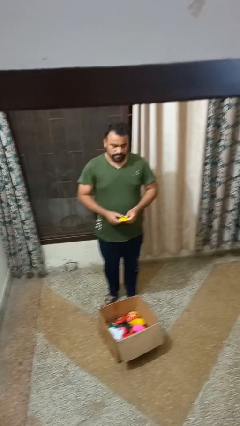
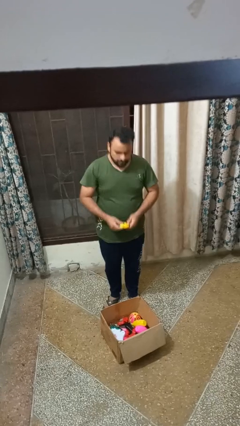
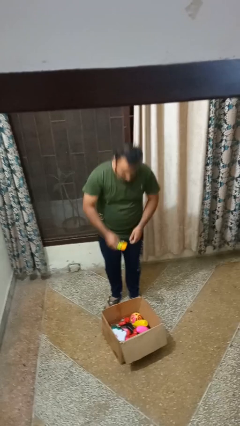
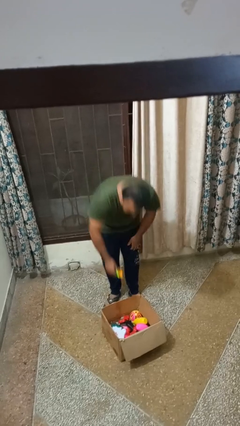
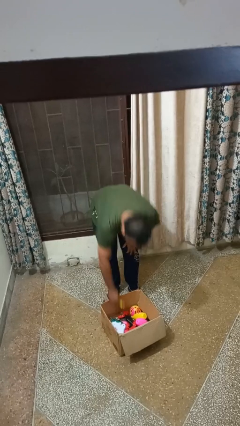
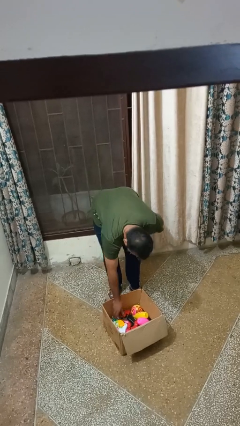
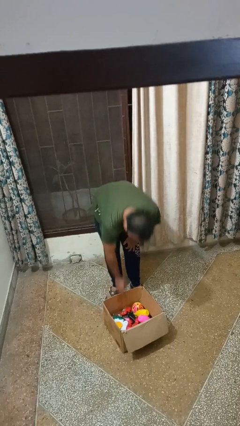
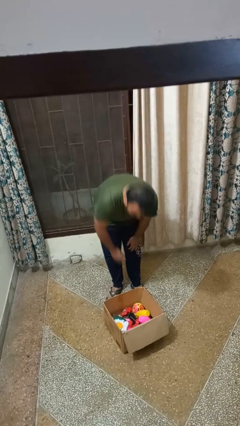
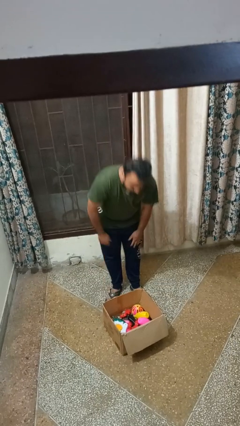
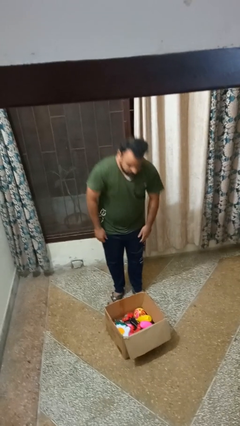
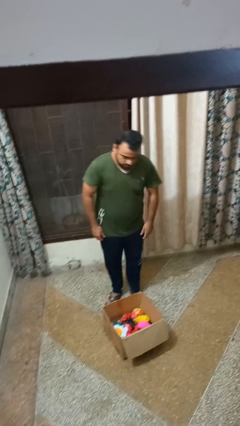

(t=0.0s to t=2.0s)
person puts object into box

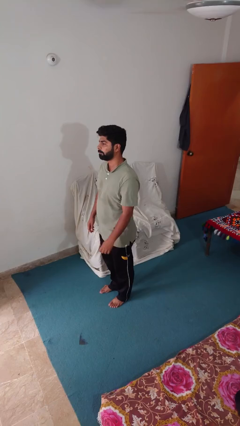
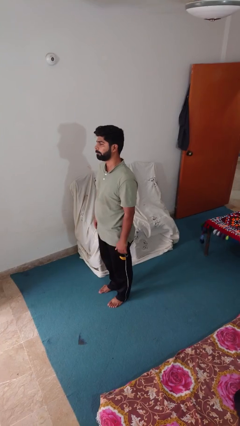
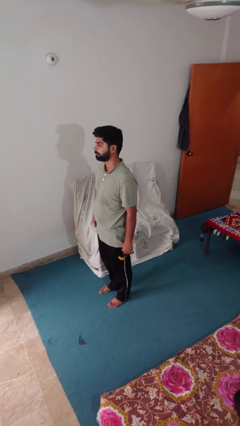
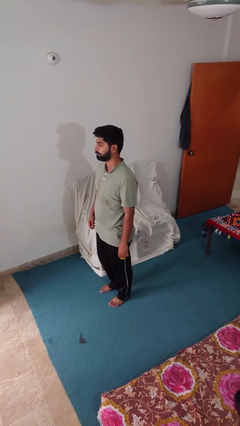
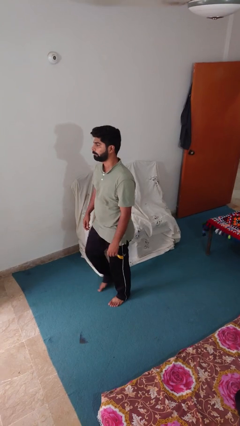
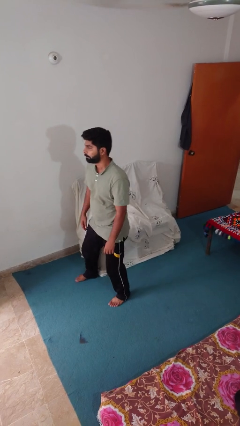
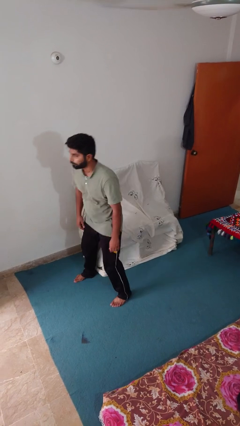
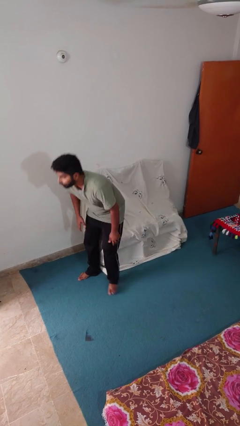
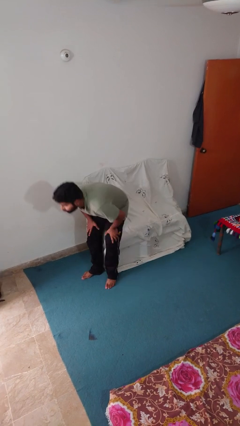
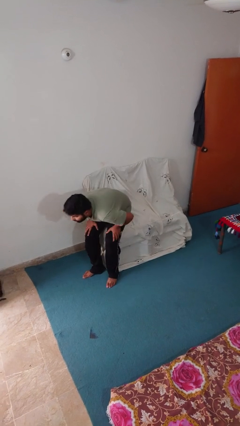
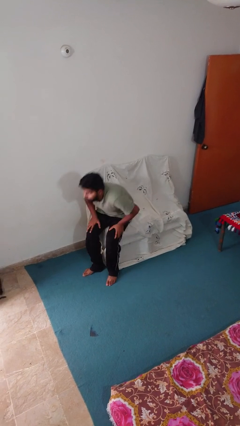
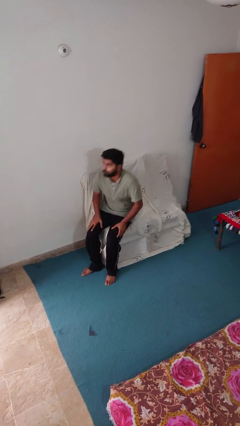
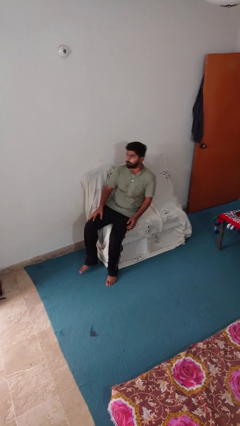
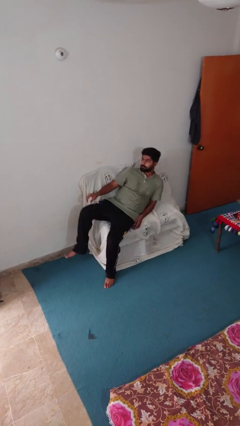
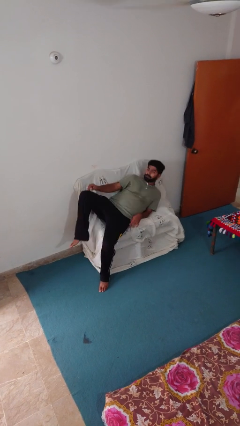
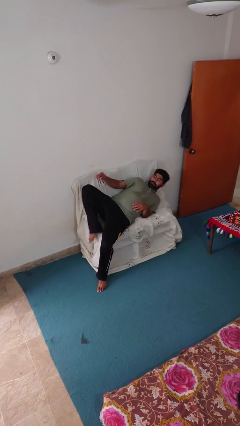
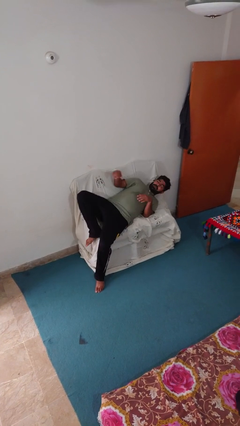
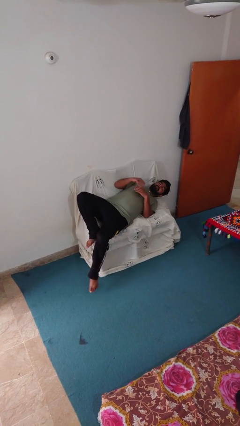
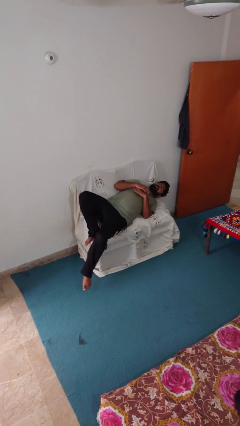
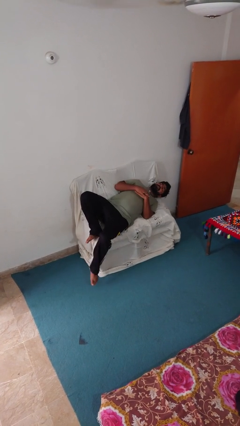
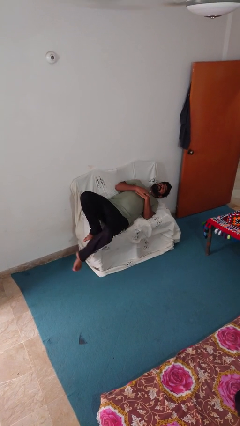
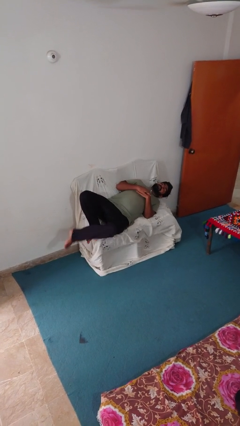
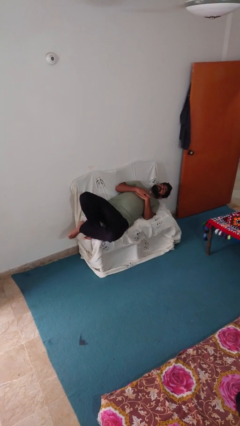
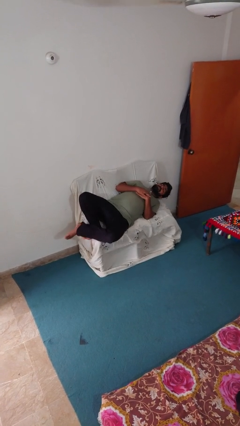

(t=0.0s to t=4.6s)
person lies down on couch

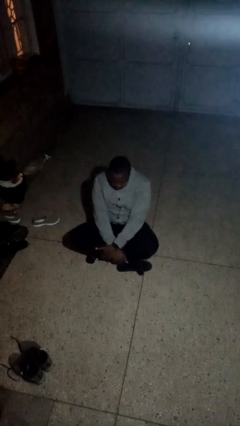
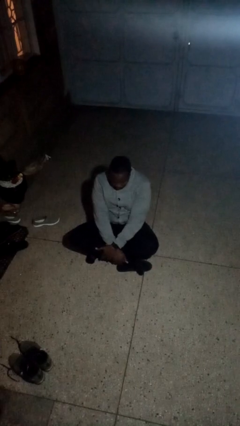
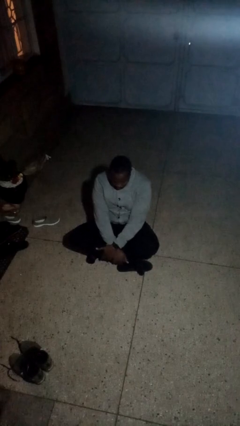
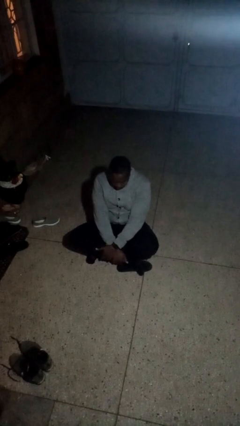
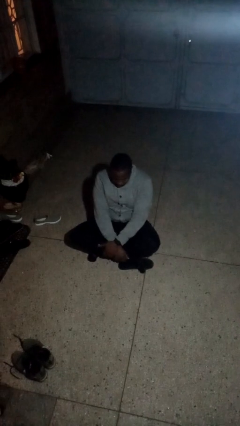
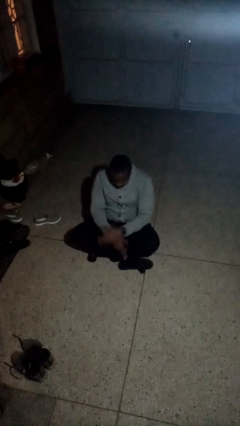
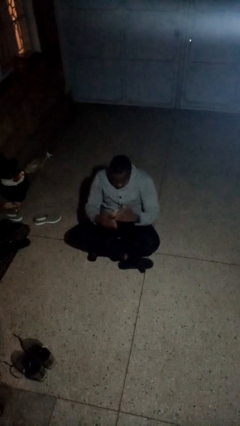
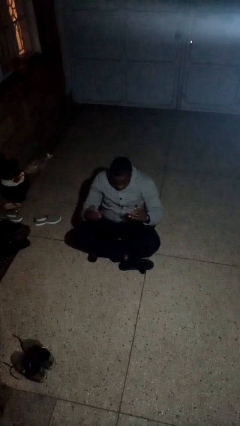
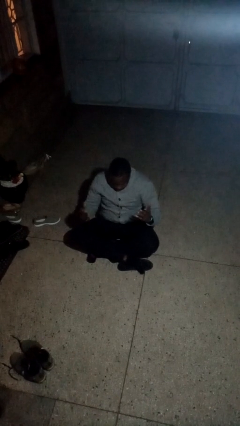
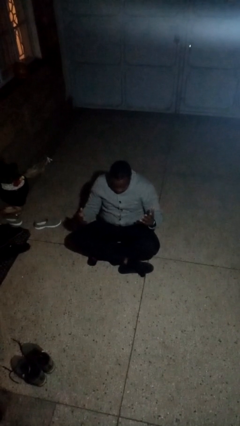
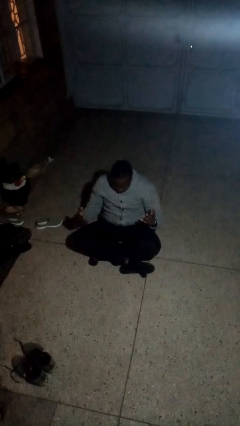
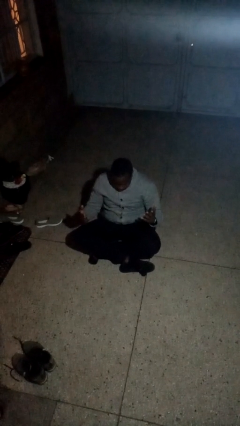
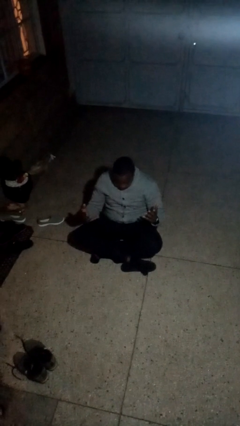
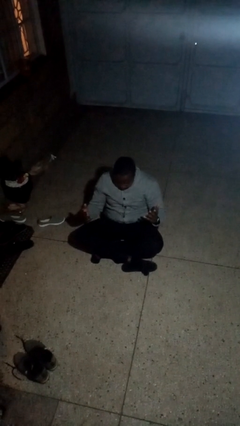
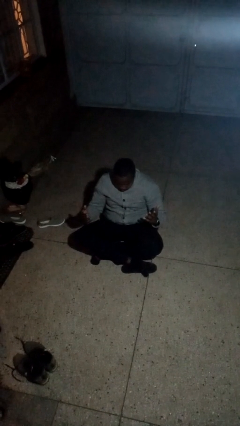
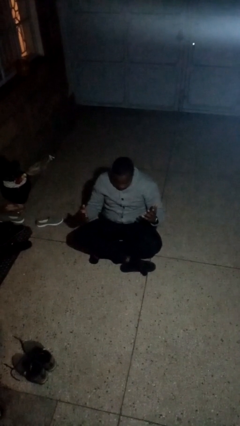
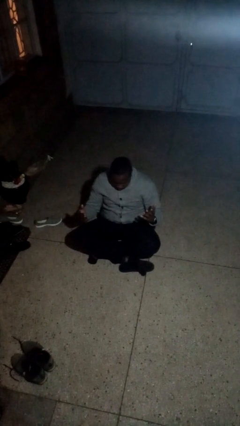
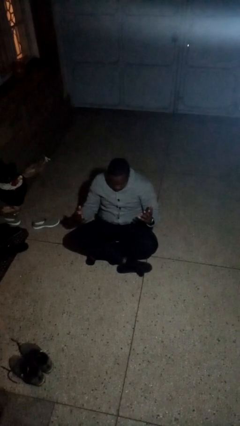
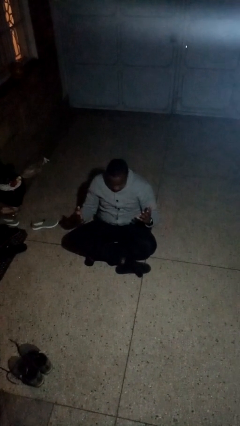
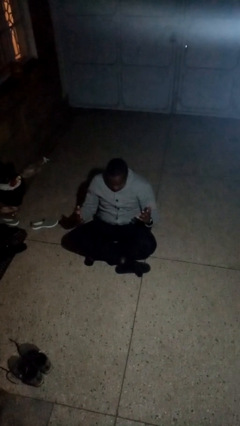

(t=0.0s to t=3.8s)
person prays

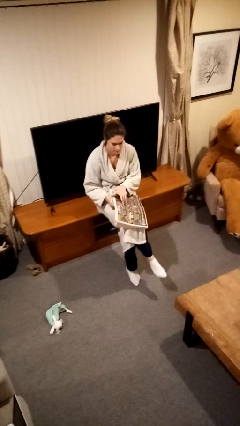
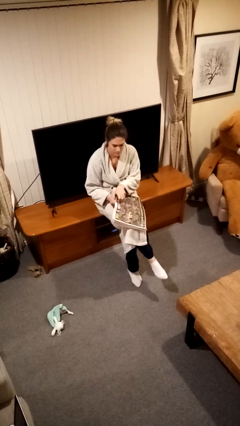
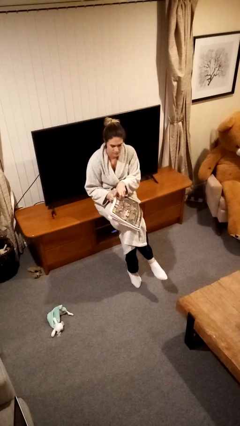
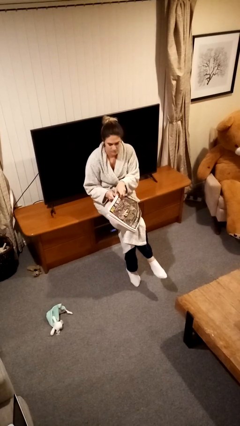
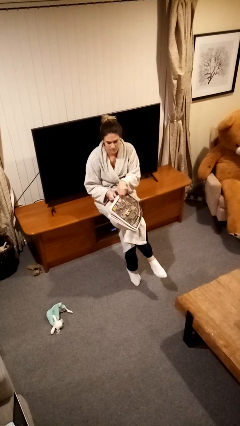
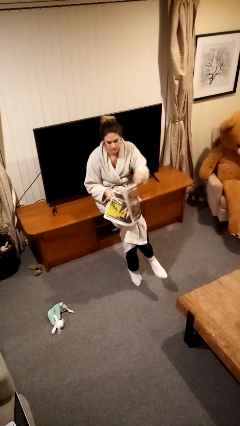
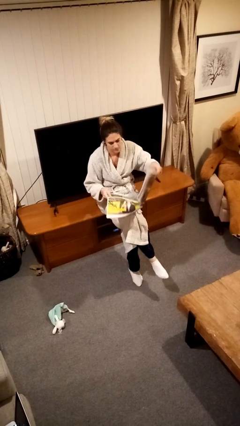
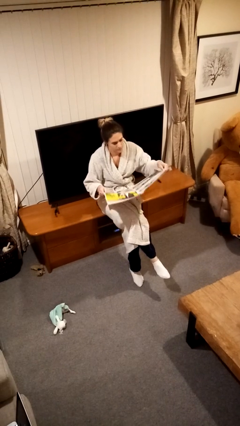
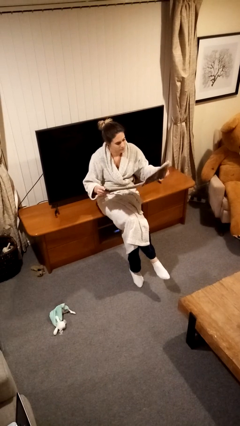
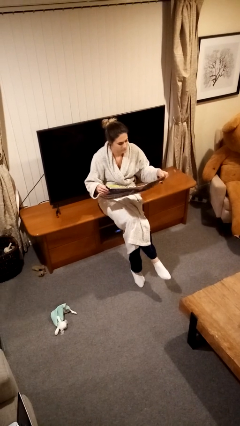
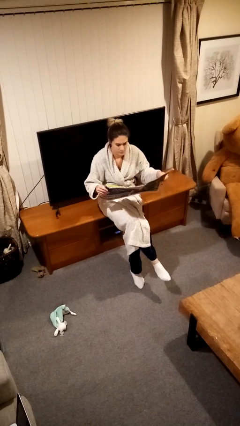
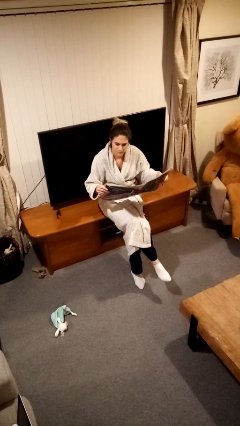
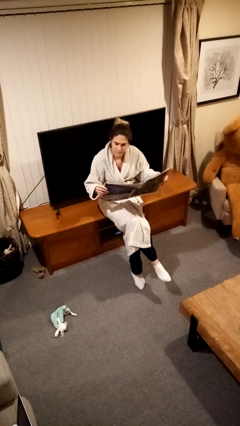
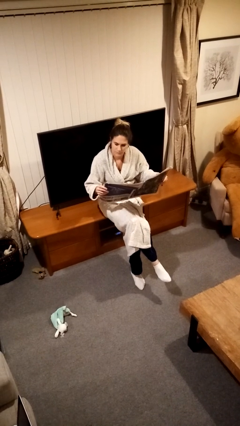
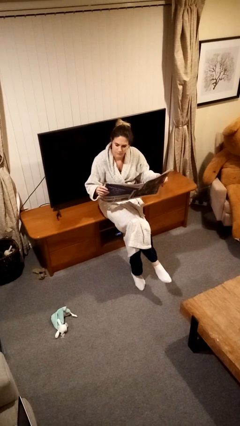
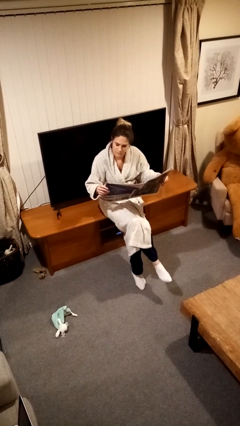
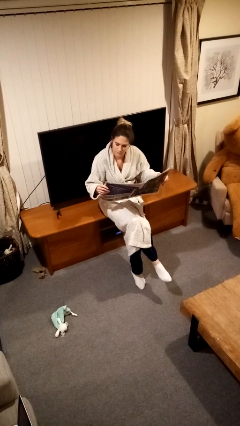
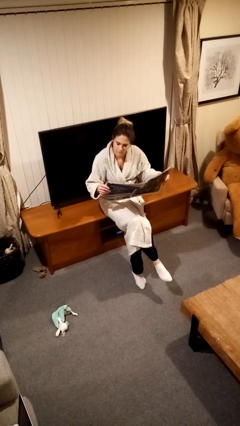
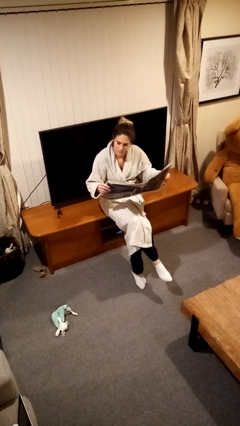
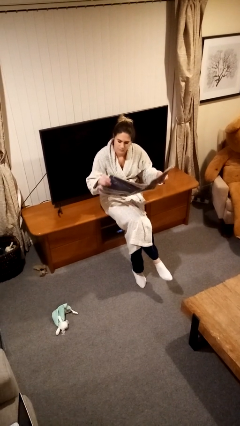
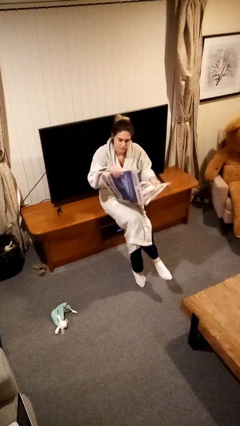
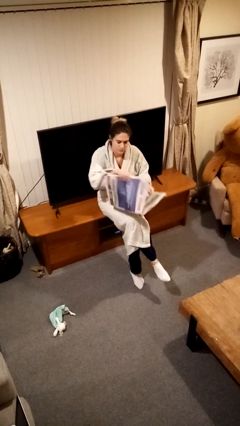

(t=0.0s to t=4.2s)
person reads newspaper

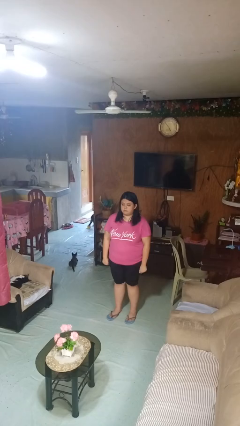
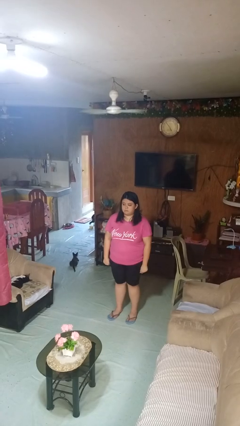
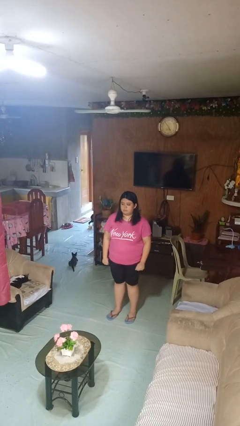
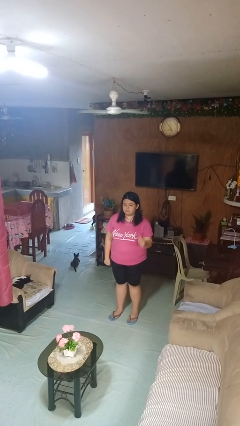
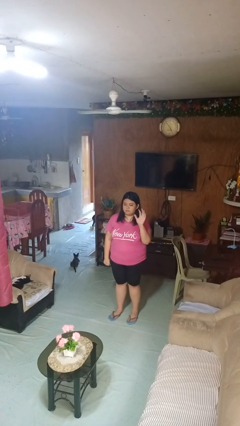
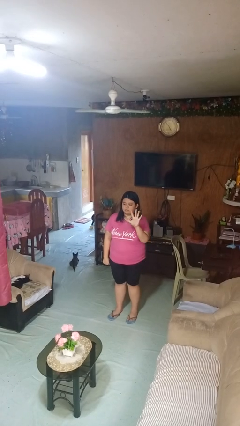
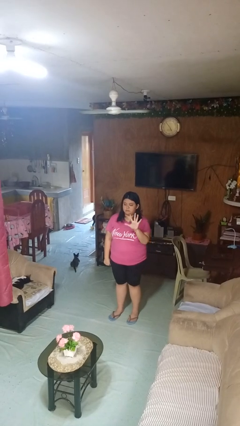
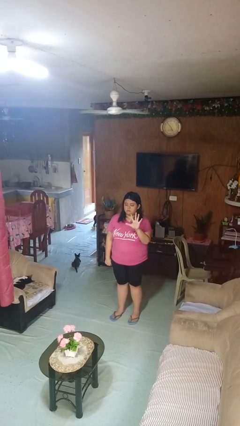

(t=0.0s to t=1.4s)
person gestures number five

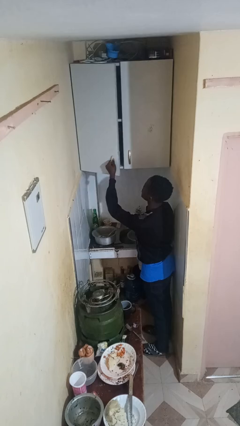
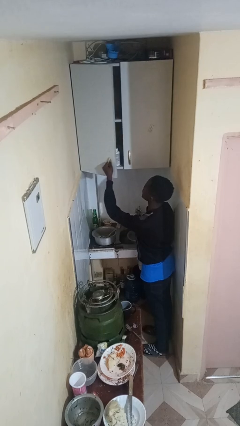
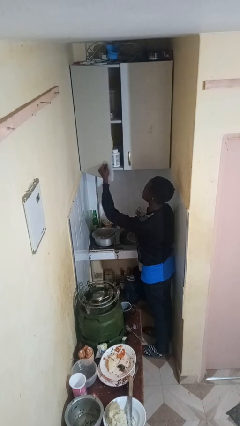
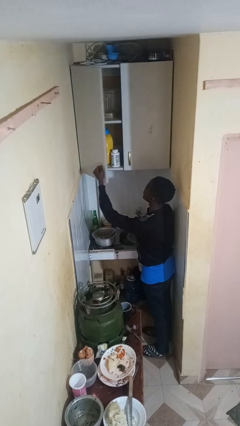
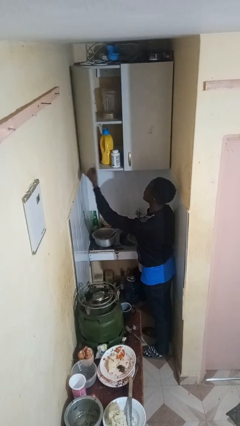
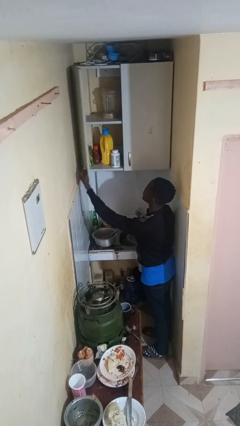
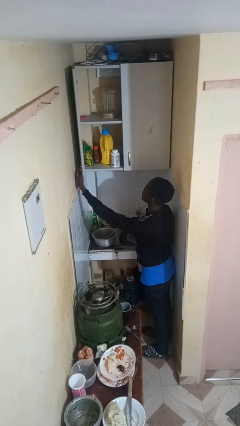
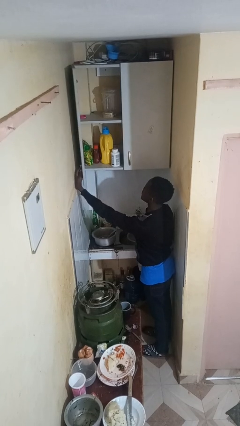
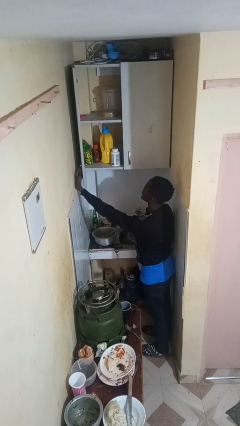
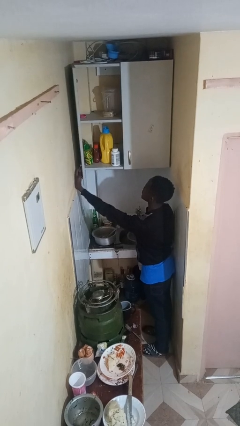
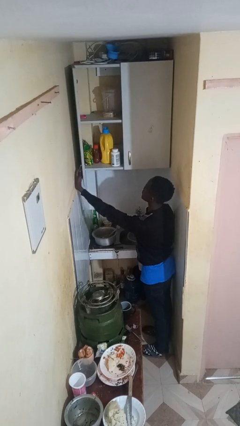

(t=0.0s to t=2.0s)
person opens kitchen drawer
